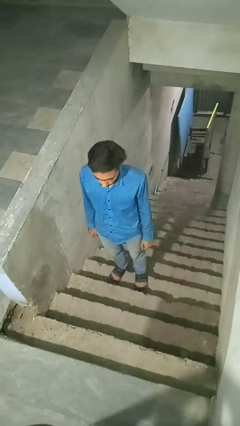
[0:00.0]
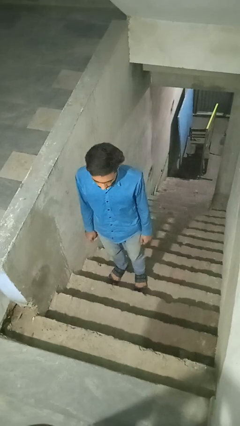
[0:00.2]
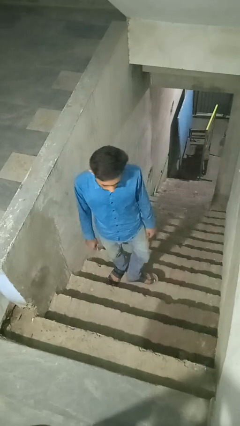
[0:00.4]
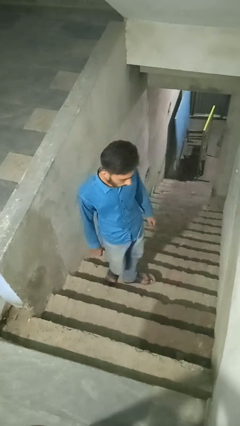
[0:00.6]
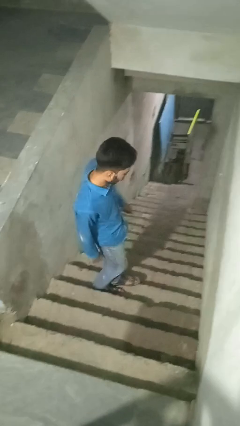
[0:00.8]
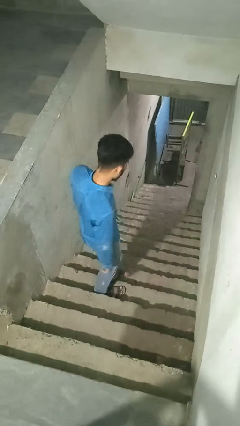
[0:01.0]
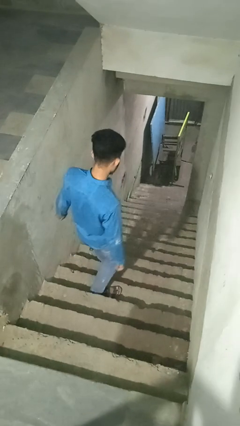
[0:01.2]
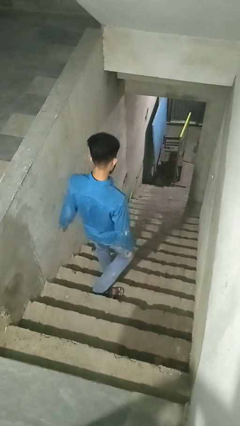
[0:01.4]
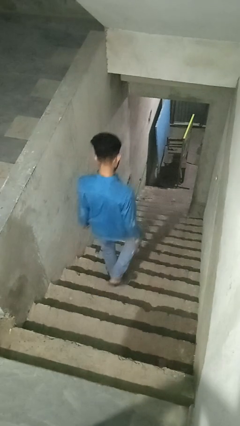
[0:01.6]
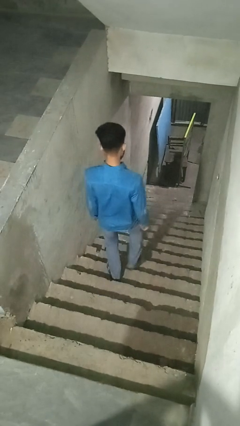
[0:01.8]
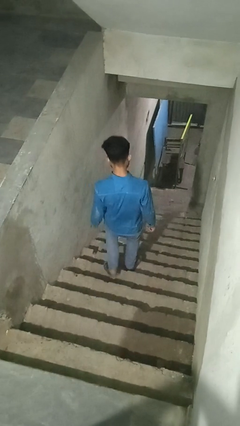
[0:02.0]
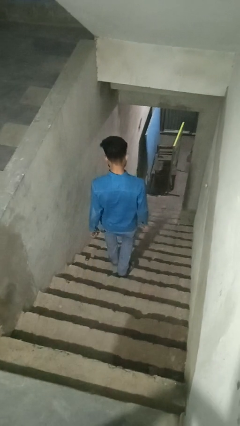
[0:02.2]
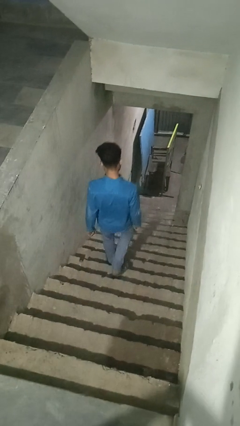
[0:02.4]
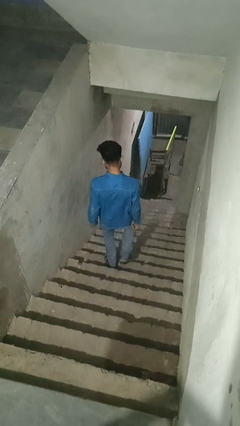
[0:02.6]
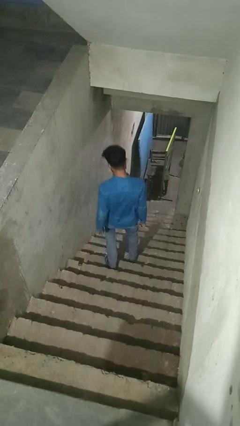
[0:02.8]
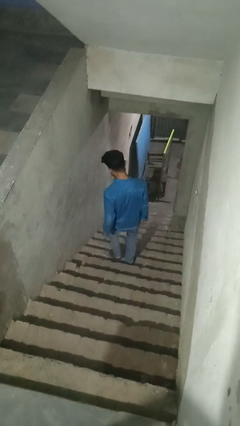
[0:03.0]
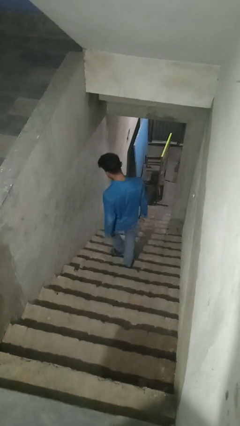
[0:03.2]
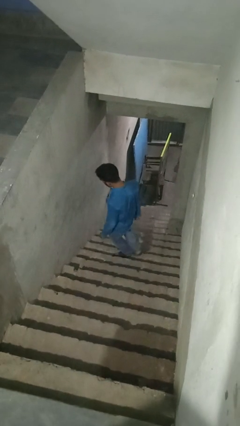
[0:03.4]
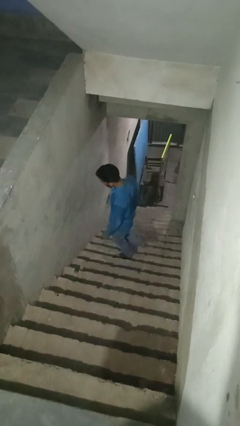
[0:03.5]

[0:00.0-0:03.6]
person climbs down stairs

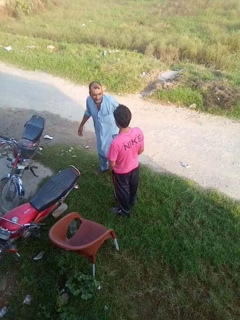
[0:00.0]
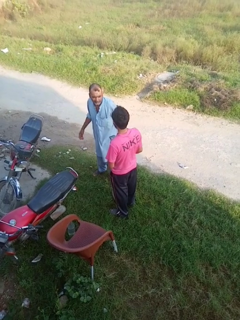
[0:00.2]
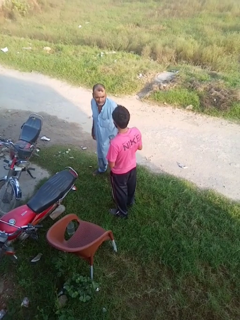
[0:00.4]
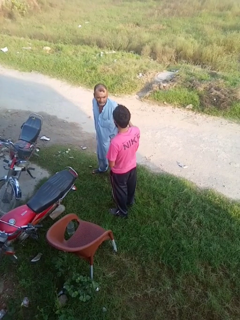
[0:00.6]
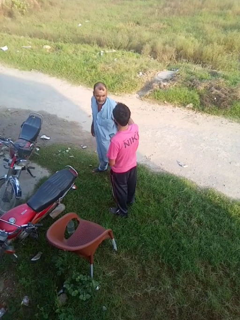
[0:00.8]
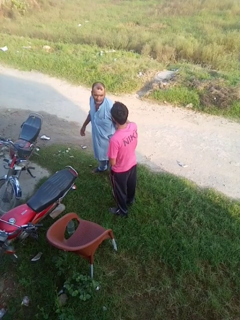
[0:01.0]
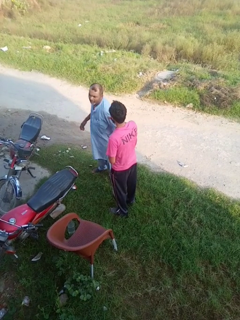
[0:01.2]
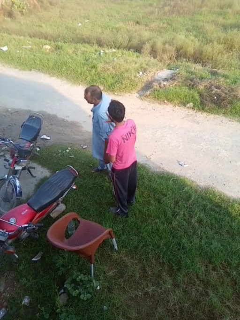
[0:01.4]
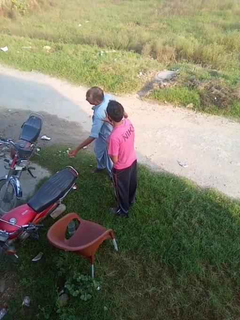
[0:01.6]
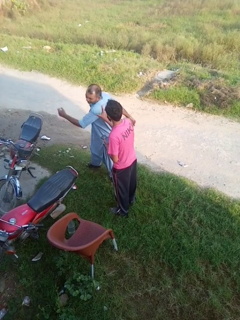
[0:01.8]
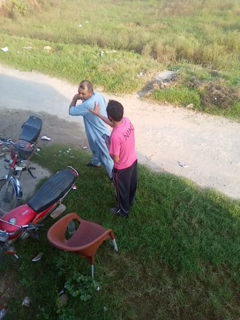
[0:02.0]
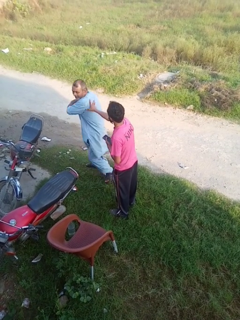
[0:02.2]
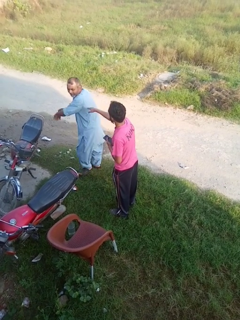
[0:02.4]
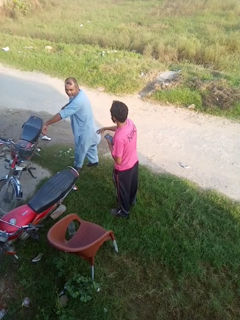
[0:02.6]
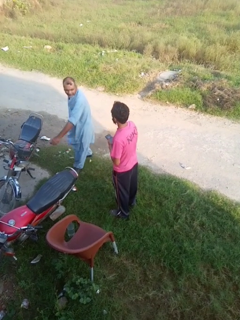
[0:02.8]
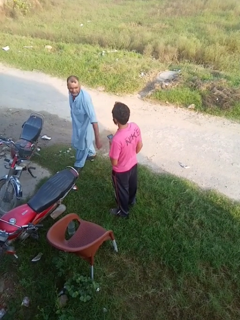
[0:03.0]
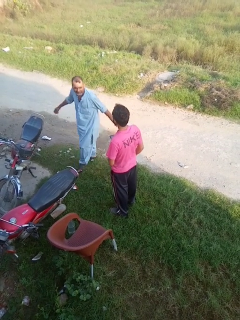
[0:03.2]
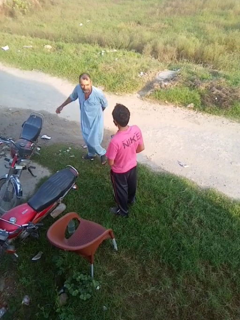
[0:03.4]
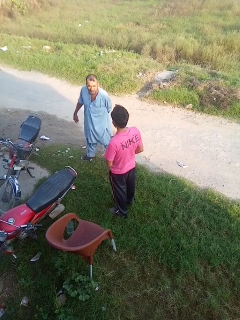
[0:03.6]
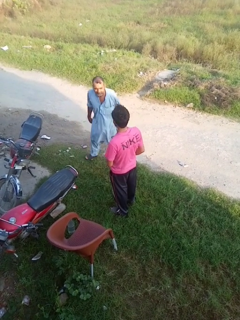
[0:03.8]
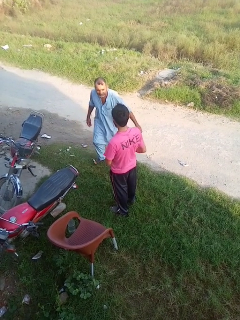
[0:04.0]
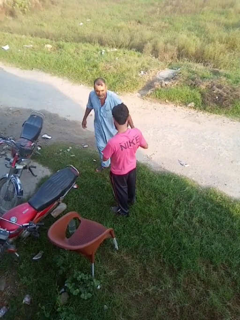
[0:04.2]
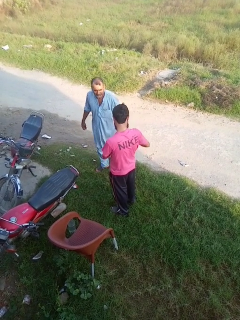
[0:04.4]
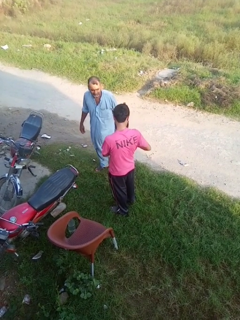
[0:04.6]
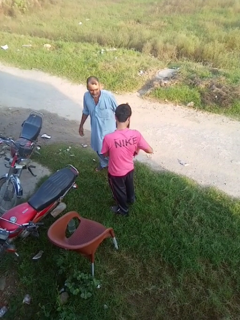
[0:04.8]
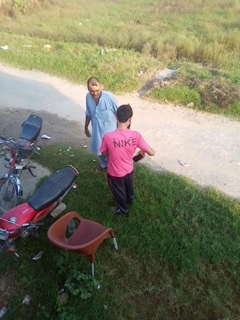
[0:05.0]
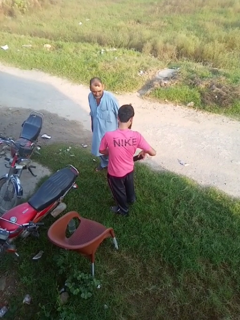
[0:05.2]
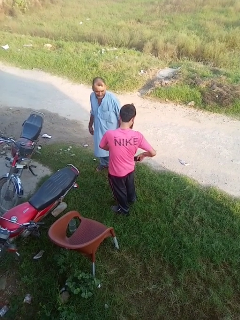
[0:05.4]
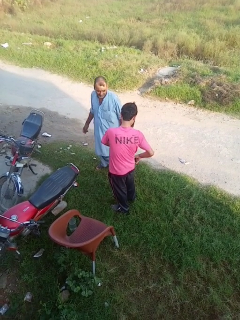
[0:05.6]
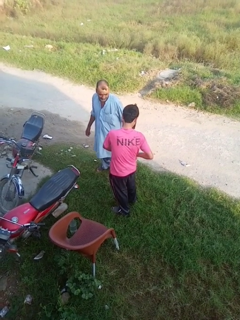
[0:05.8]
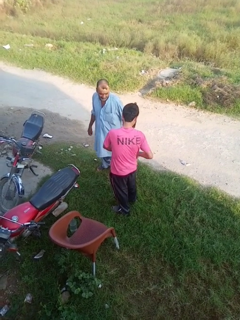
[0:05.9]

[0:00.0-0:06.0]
person shoves person

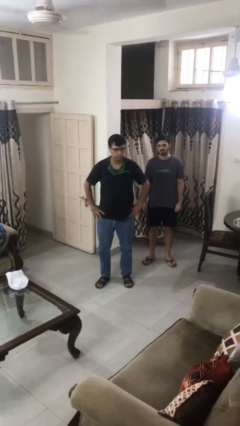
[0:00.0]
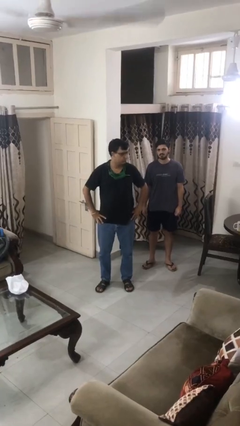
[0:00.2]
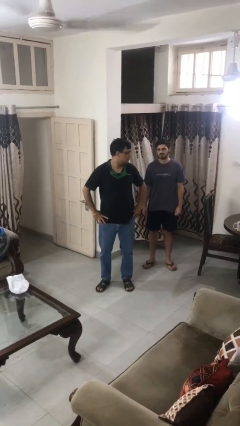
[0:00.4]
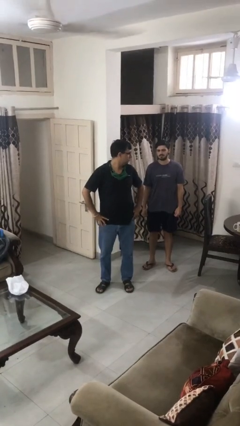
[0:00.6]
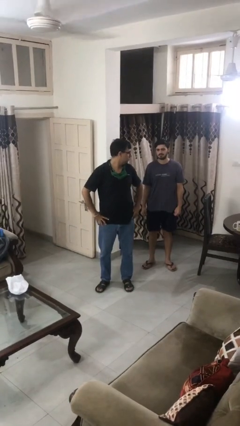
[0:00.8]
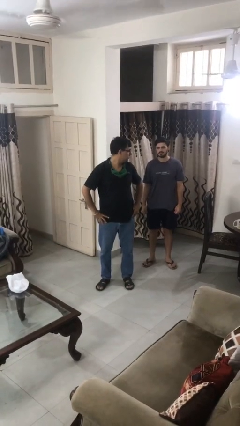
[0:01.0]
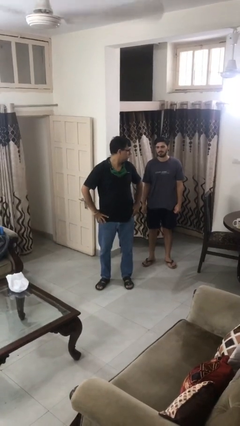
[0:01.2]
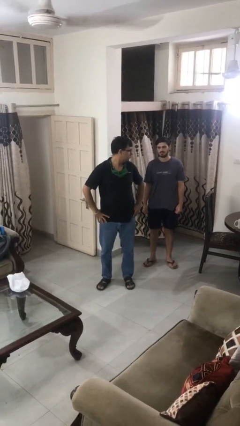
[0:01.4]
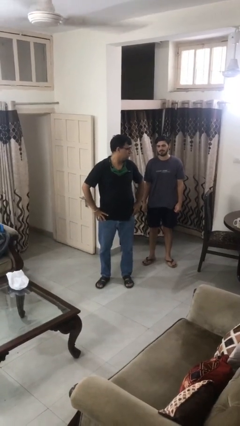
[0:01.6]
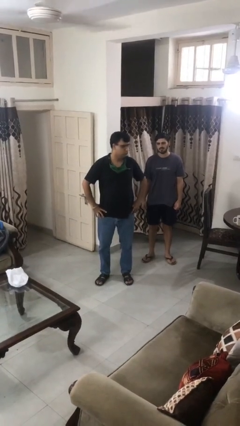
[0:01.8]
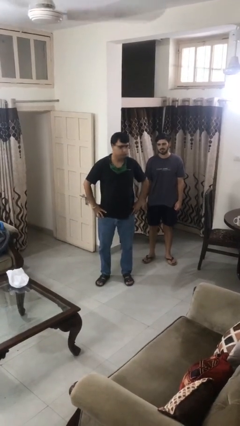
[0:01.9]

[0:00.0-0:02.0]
person looks over shoulder

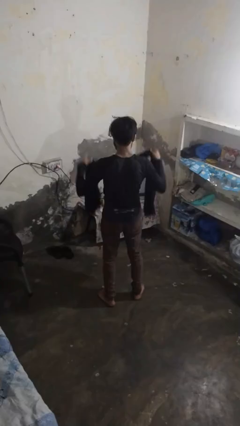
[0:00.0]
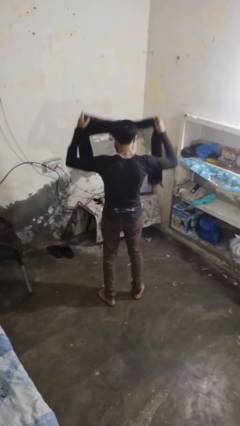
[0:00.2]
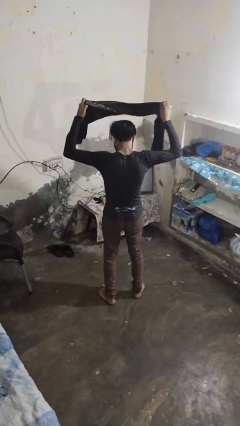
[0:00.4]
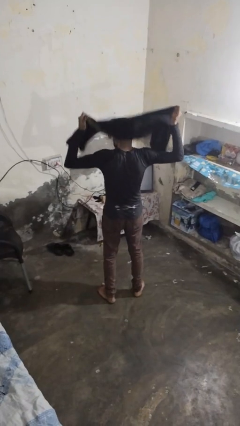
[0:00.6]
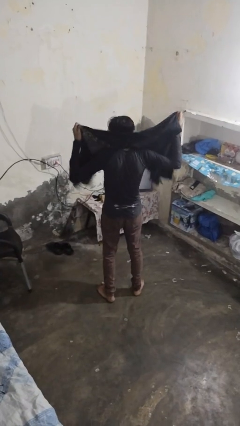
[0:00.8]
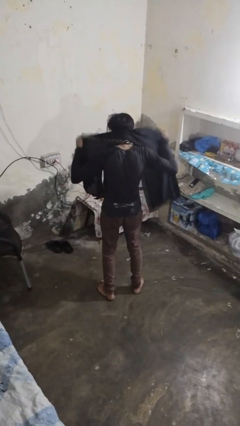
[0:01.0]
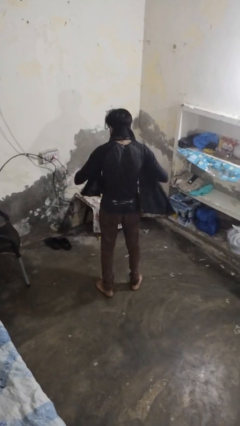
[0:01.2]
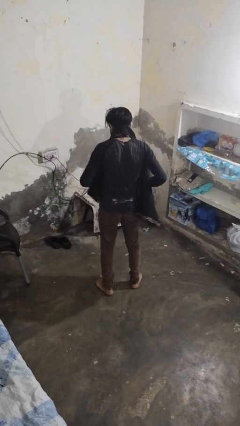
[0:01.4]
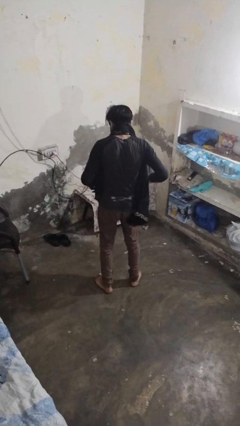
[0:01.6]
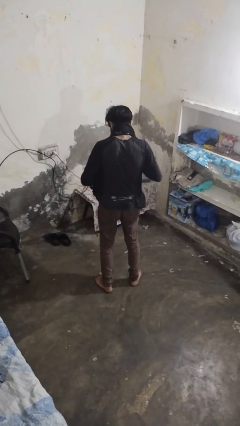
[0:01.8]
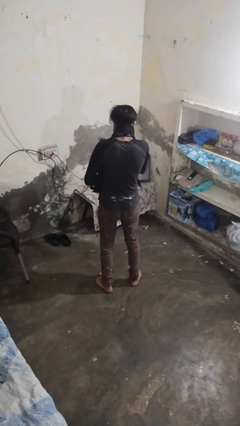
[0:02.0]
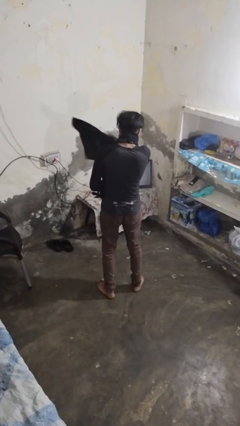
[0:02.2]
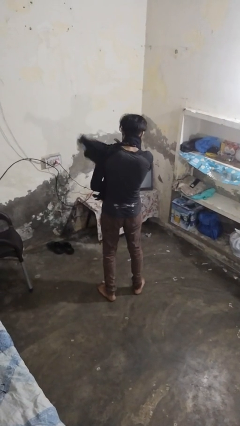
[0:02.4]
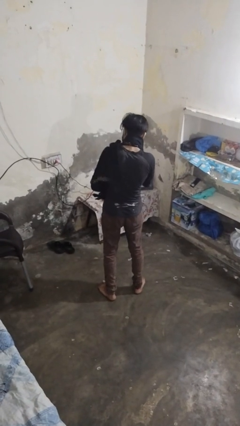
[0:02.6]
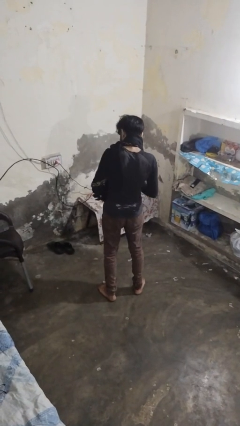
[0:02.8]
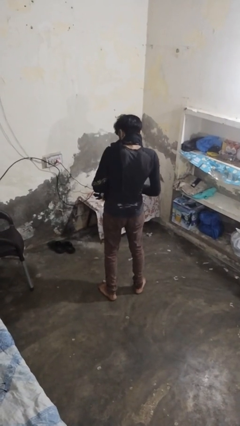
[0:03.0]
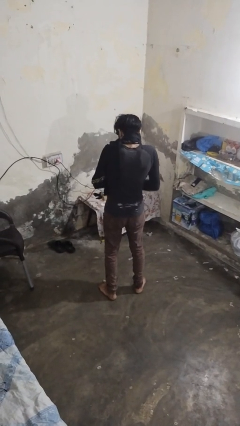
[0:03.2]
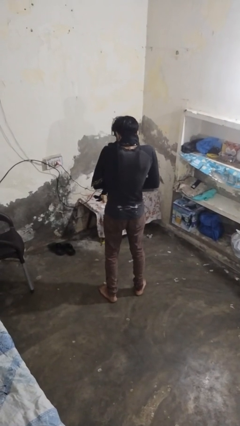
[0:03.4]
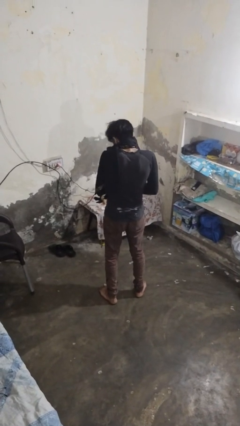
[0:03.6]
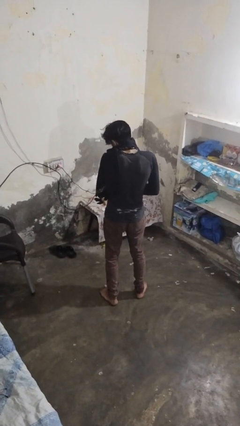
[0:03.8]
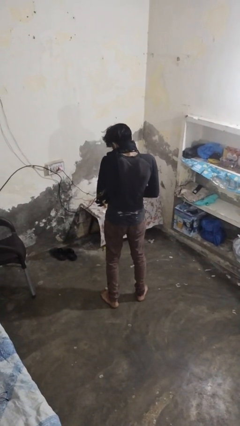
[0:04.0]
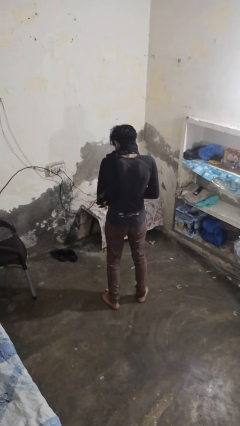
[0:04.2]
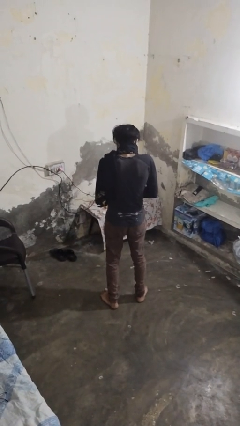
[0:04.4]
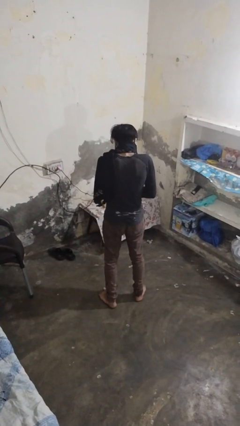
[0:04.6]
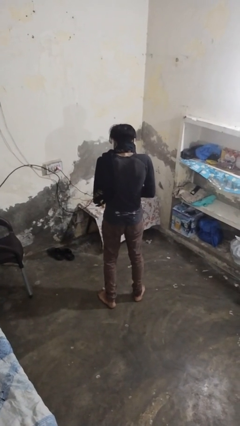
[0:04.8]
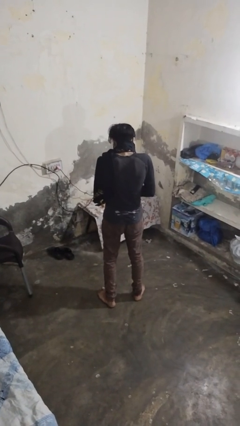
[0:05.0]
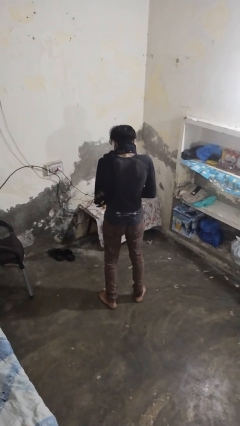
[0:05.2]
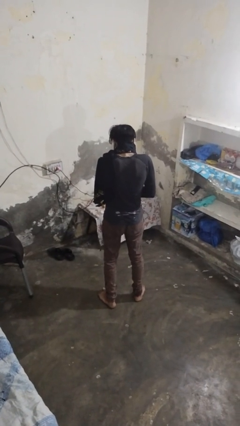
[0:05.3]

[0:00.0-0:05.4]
person puts on scarf

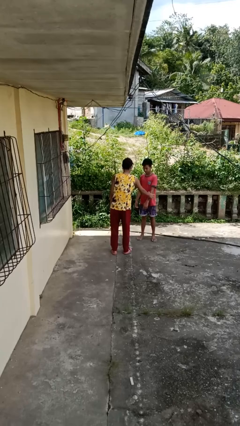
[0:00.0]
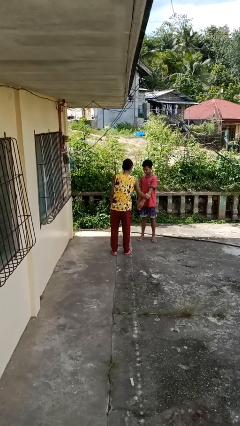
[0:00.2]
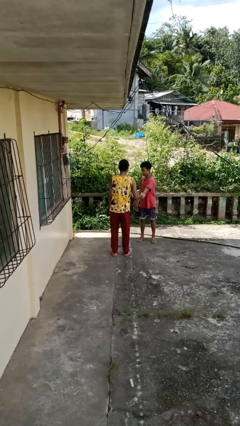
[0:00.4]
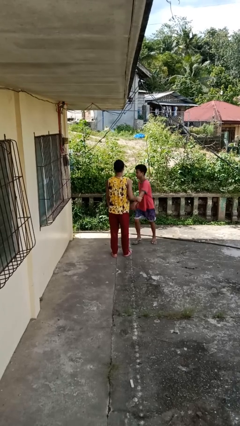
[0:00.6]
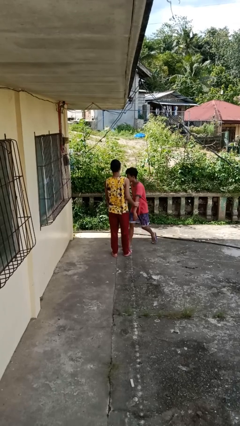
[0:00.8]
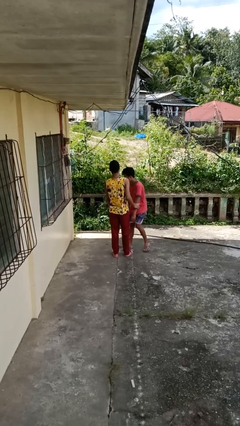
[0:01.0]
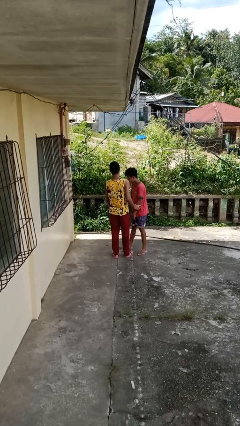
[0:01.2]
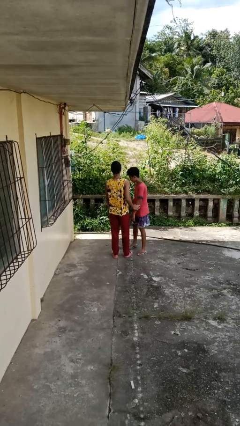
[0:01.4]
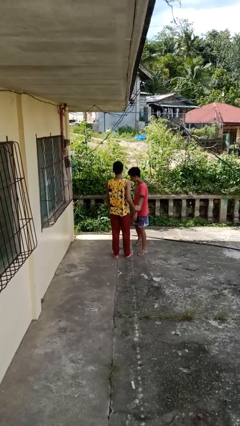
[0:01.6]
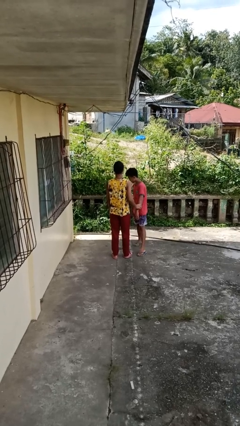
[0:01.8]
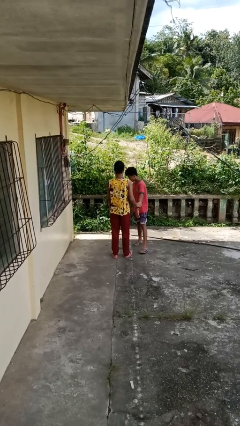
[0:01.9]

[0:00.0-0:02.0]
person grabs person by forearm
